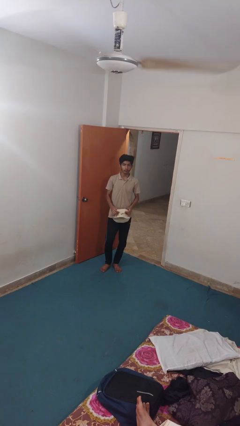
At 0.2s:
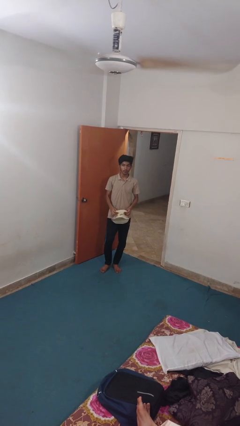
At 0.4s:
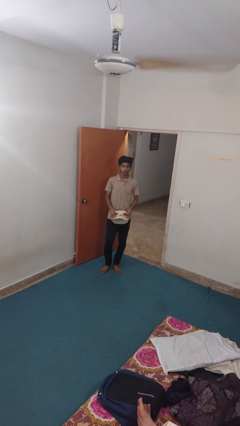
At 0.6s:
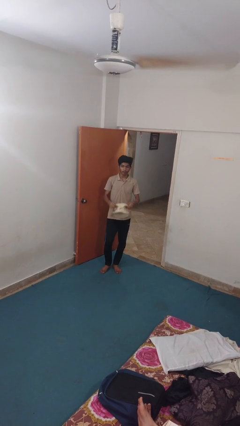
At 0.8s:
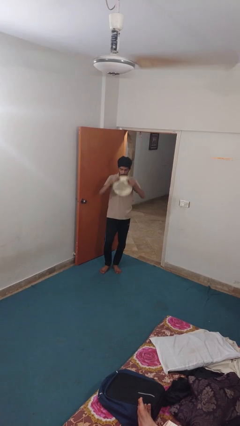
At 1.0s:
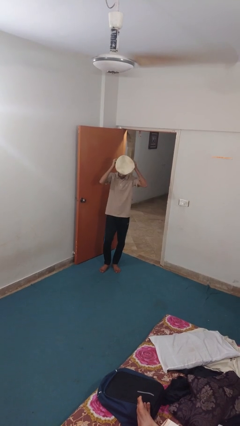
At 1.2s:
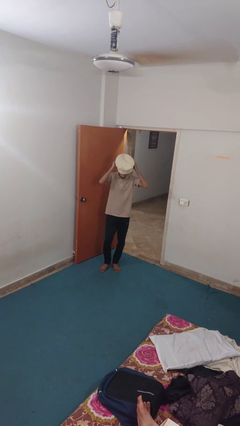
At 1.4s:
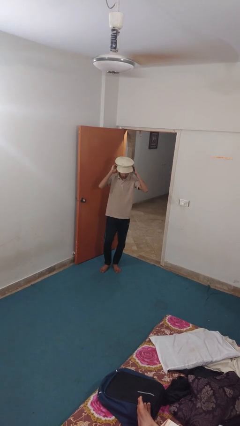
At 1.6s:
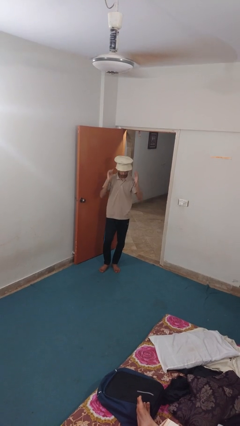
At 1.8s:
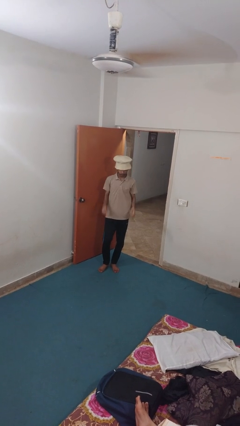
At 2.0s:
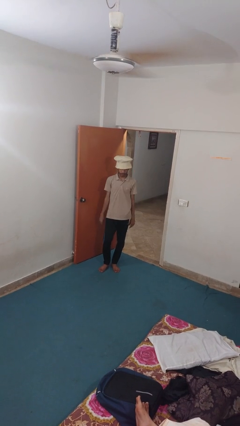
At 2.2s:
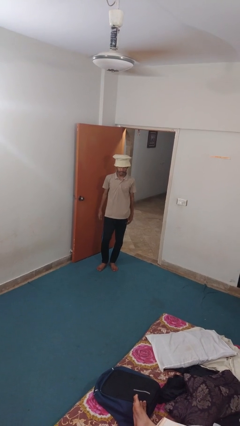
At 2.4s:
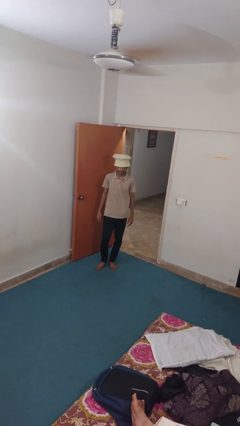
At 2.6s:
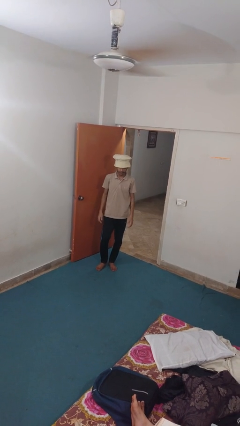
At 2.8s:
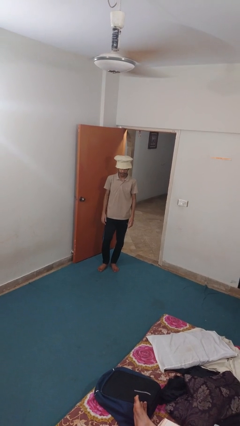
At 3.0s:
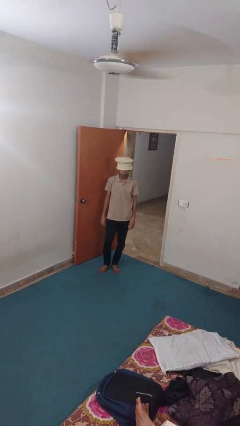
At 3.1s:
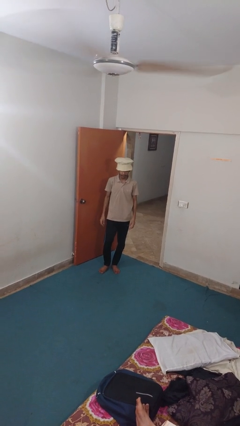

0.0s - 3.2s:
person puts on hat

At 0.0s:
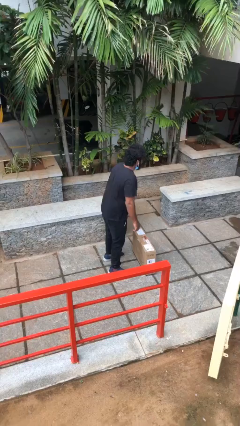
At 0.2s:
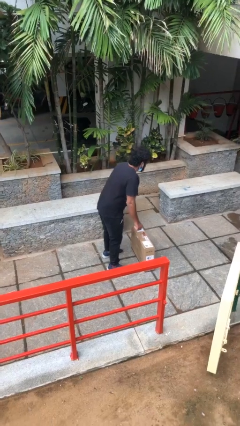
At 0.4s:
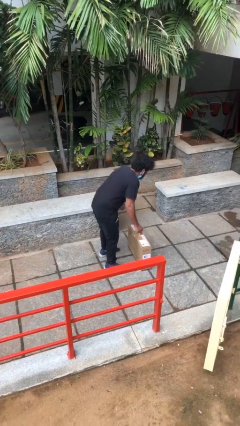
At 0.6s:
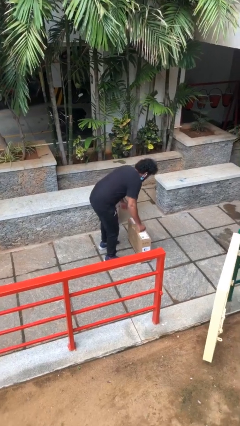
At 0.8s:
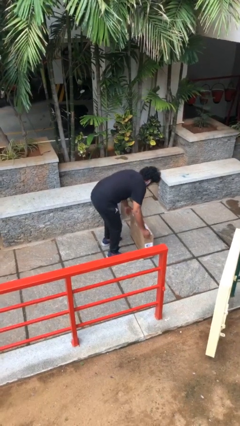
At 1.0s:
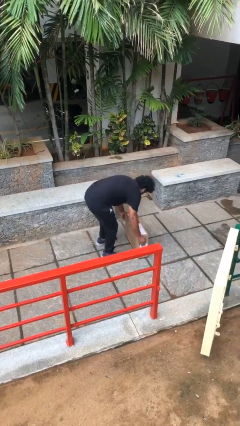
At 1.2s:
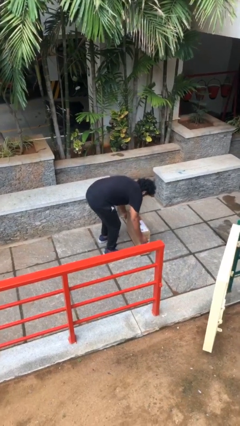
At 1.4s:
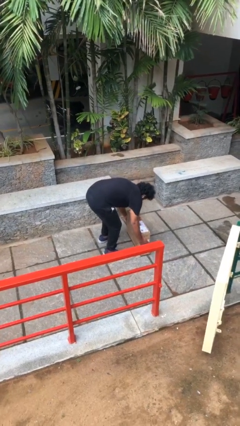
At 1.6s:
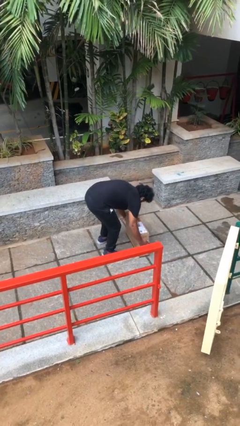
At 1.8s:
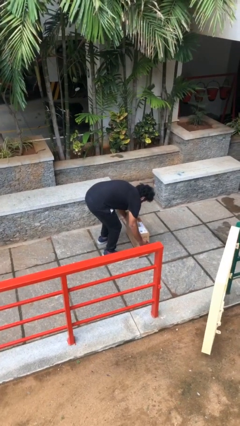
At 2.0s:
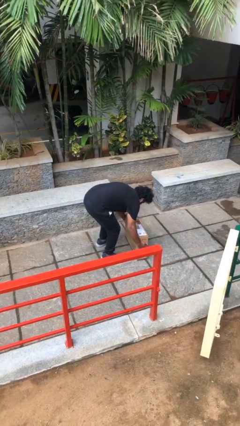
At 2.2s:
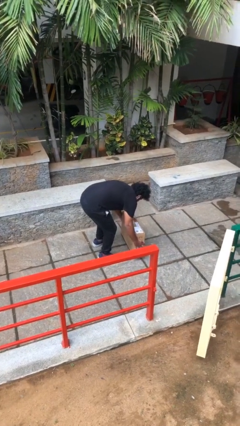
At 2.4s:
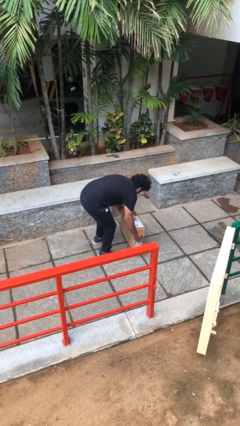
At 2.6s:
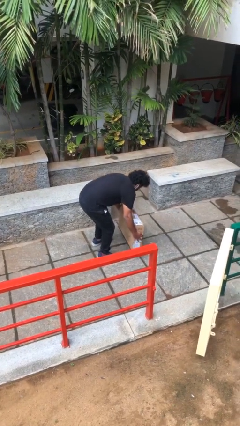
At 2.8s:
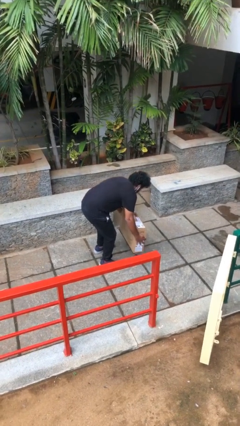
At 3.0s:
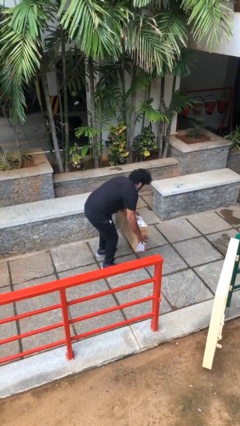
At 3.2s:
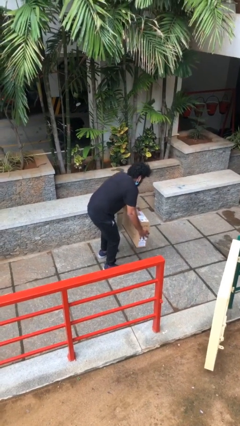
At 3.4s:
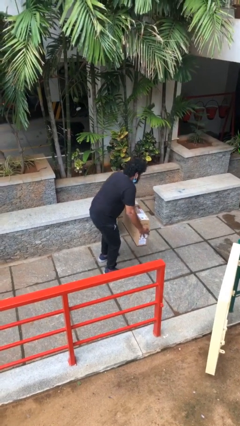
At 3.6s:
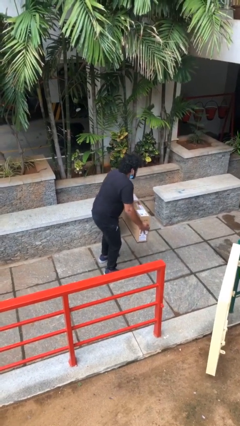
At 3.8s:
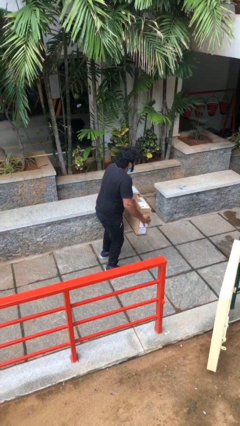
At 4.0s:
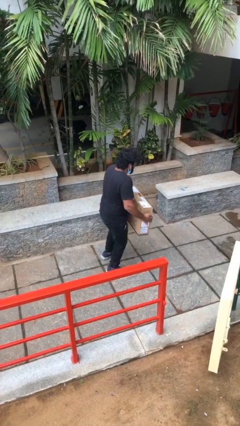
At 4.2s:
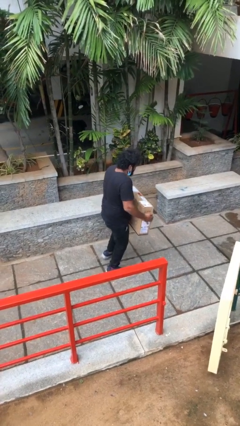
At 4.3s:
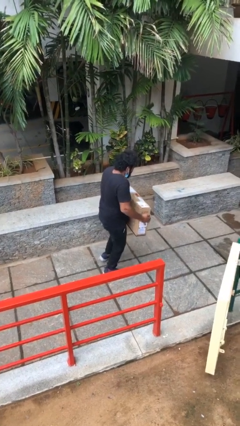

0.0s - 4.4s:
person picks up object from floor

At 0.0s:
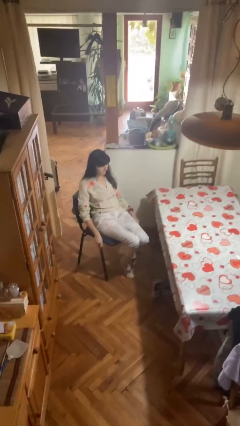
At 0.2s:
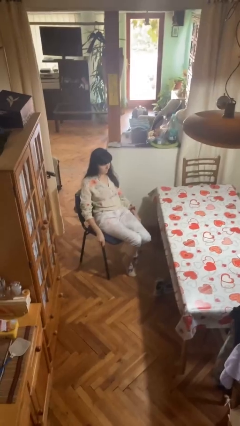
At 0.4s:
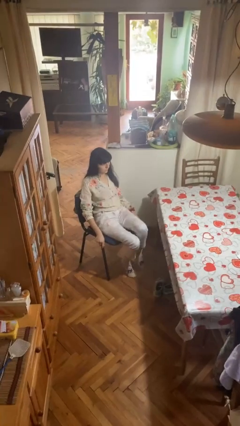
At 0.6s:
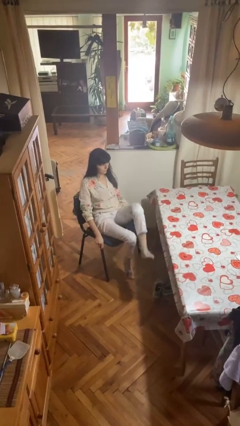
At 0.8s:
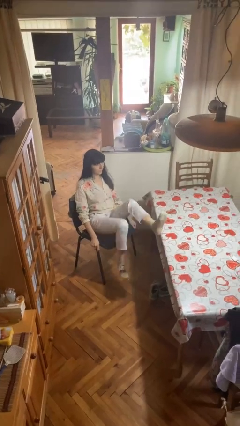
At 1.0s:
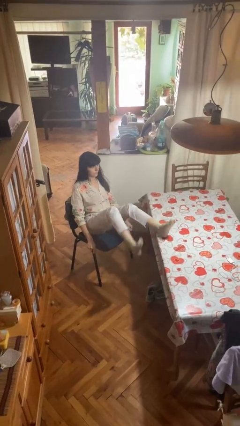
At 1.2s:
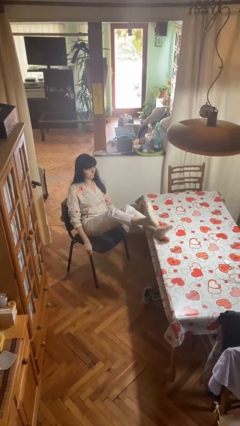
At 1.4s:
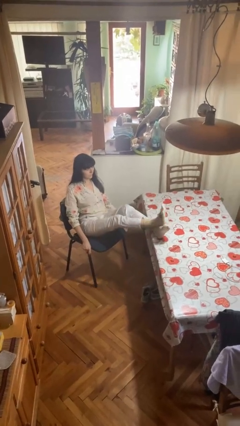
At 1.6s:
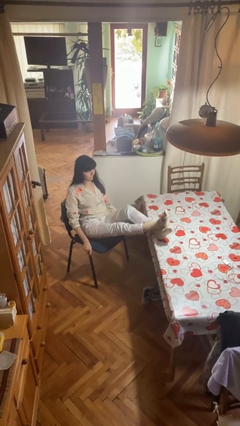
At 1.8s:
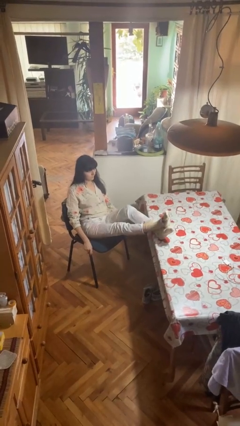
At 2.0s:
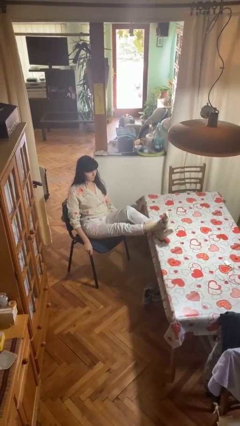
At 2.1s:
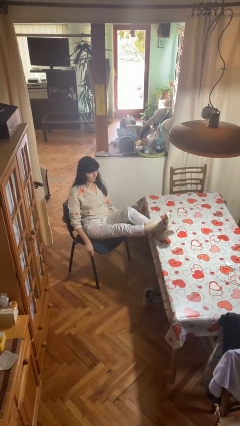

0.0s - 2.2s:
person puts feet up

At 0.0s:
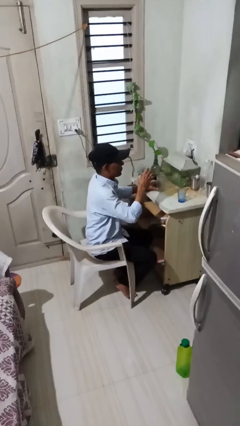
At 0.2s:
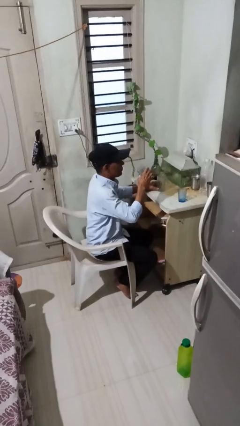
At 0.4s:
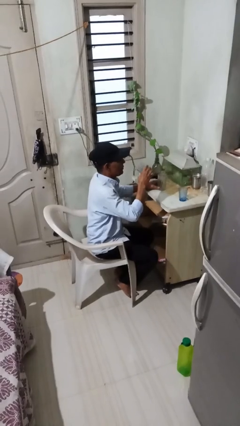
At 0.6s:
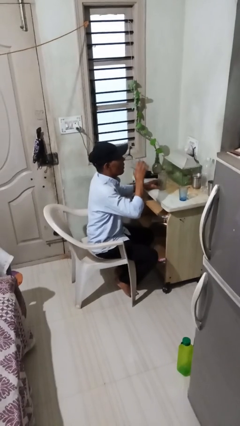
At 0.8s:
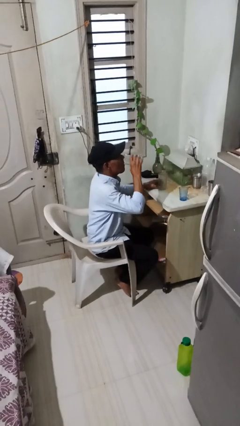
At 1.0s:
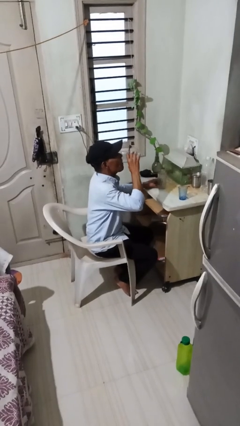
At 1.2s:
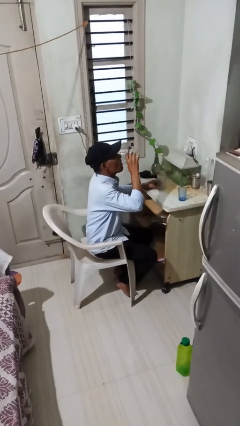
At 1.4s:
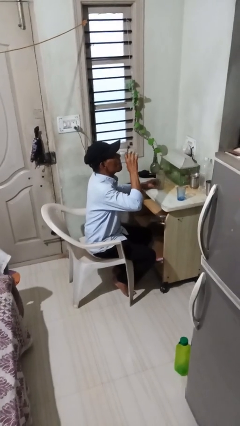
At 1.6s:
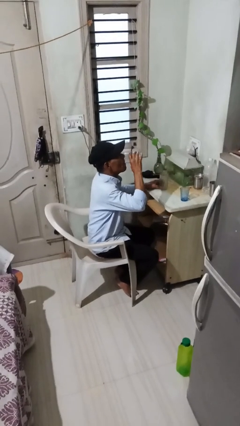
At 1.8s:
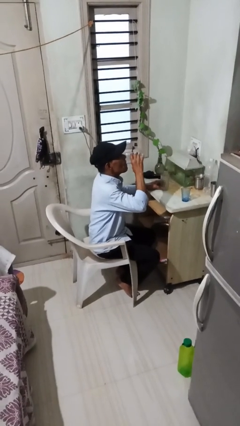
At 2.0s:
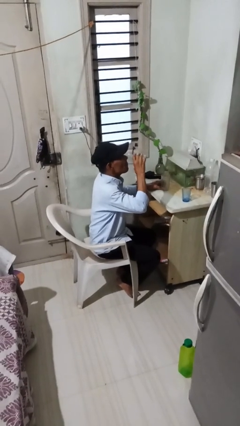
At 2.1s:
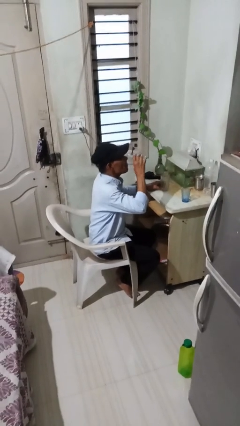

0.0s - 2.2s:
person drinks from shotglass

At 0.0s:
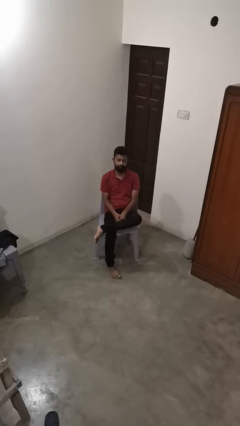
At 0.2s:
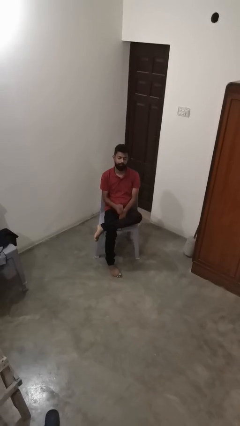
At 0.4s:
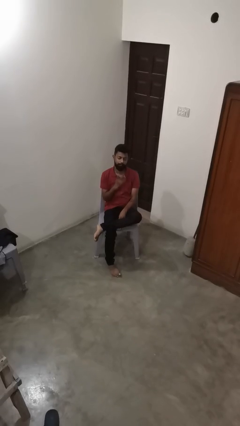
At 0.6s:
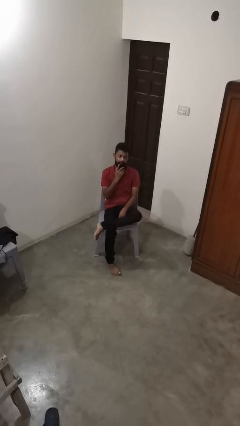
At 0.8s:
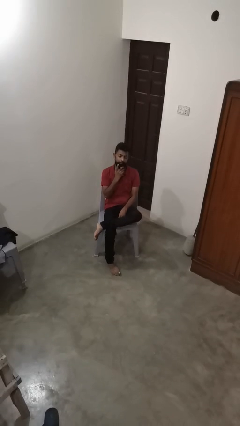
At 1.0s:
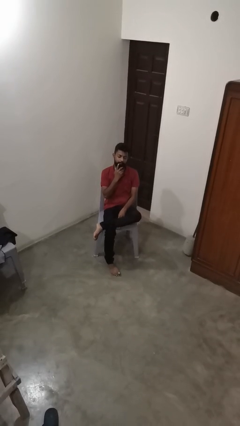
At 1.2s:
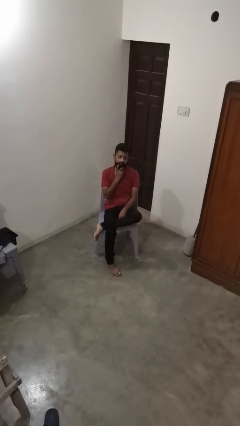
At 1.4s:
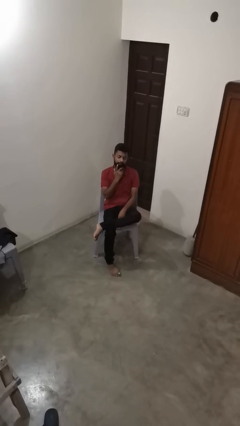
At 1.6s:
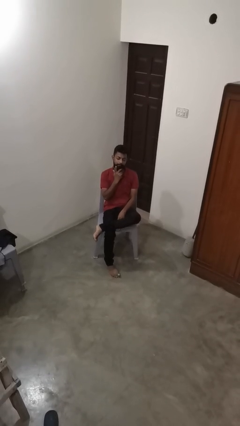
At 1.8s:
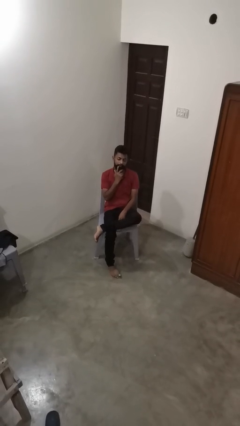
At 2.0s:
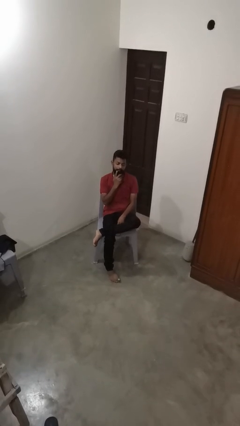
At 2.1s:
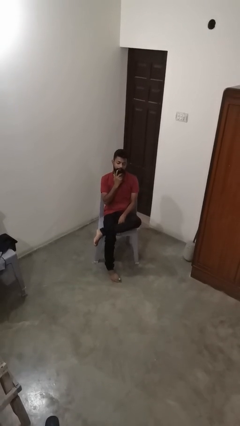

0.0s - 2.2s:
person strokes chin

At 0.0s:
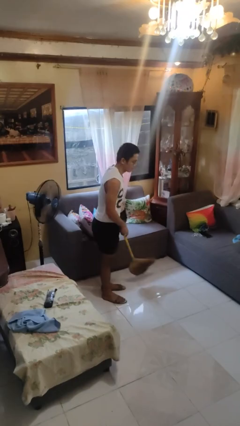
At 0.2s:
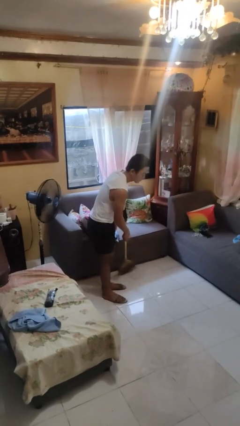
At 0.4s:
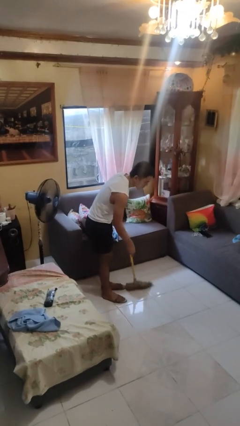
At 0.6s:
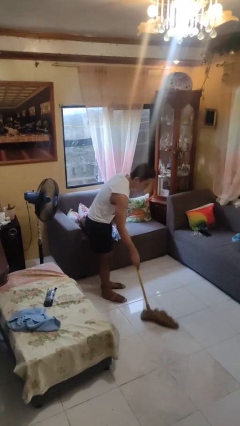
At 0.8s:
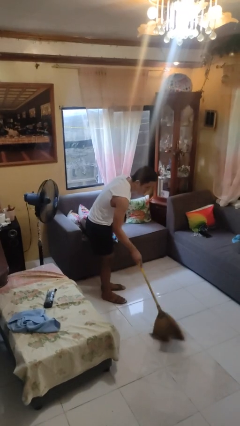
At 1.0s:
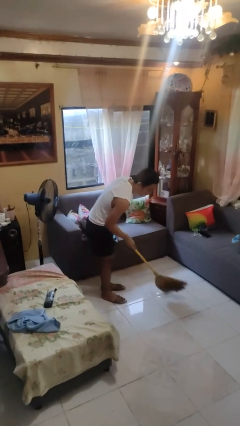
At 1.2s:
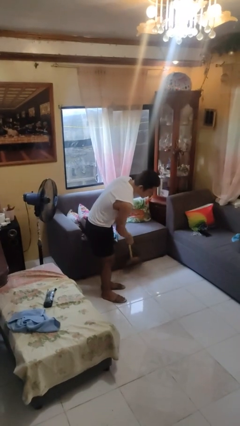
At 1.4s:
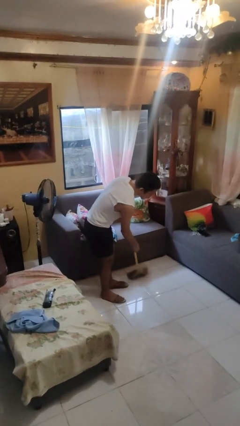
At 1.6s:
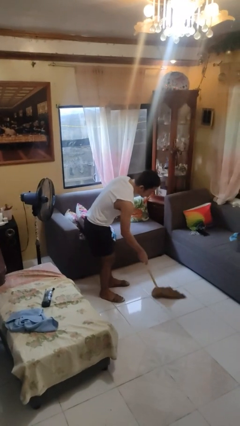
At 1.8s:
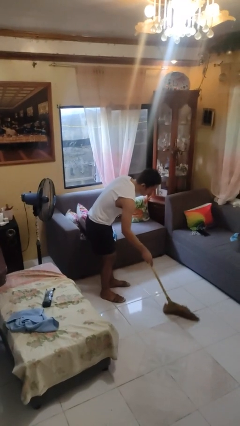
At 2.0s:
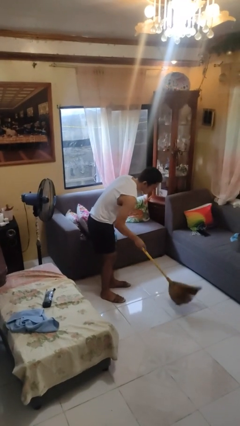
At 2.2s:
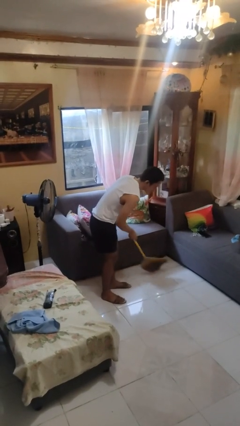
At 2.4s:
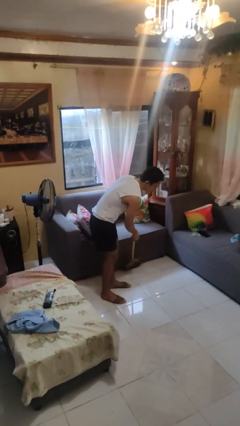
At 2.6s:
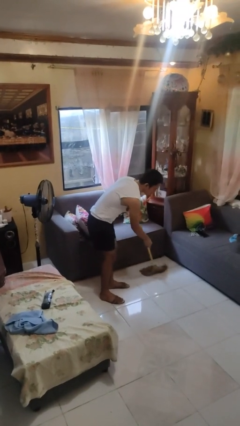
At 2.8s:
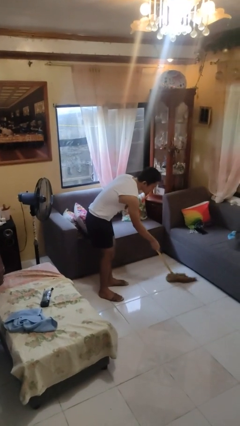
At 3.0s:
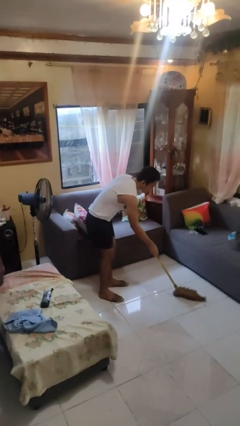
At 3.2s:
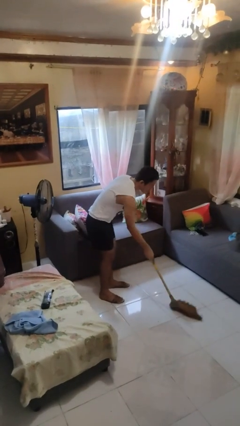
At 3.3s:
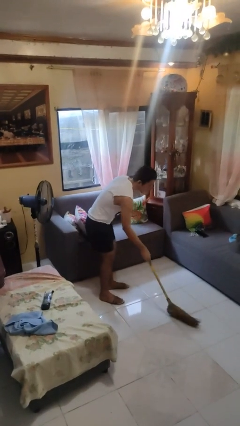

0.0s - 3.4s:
person sweeps floor
